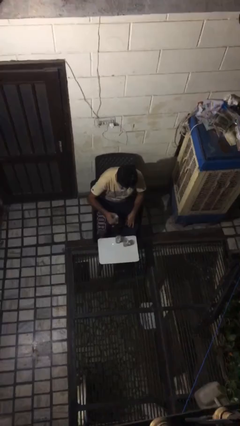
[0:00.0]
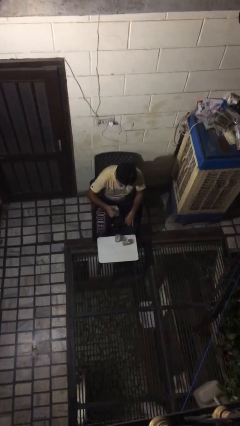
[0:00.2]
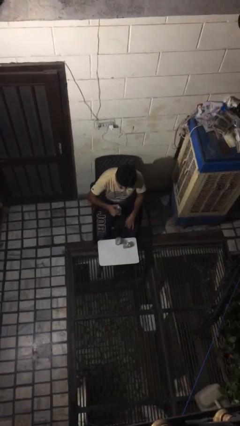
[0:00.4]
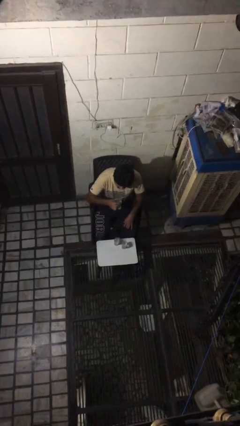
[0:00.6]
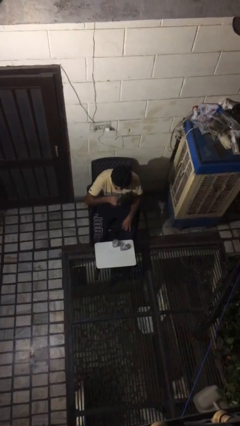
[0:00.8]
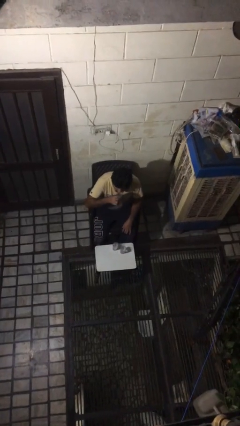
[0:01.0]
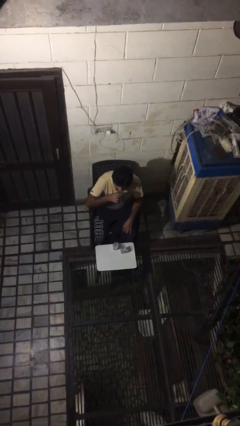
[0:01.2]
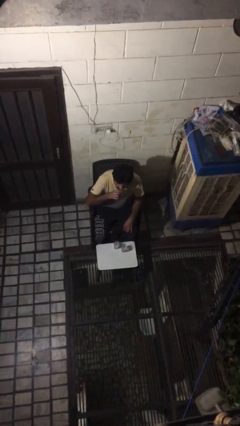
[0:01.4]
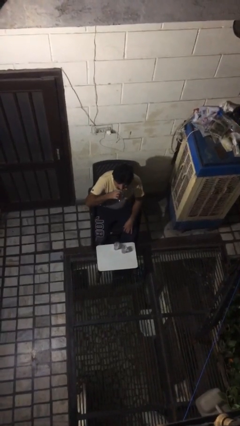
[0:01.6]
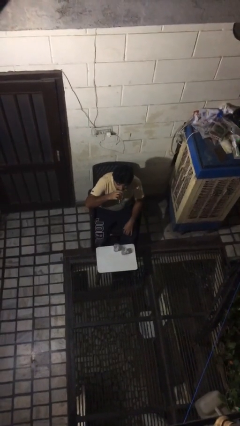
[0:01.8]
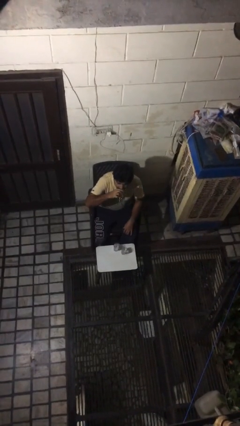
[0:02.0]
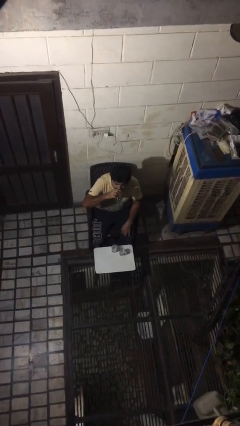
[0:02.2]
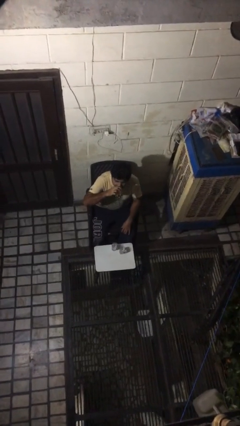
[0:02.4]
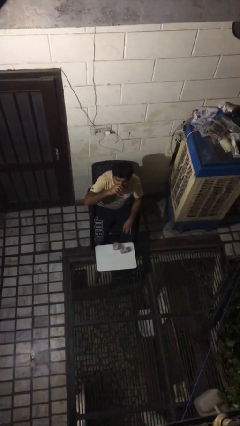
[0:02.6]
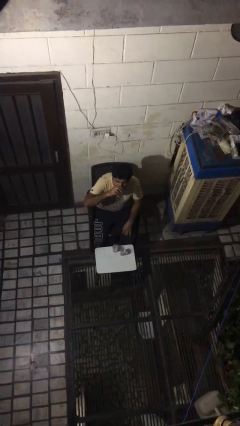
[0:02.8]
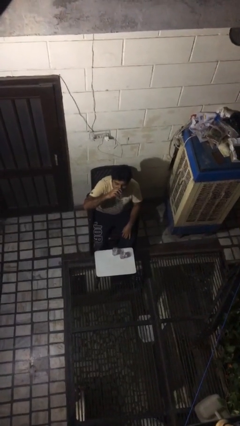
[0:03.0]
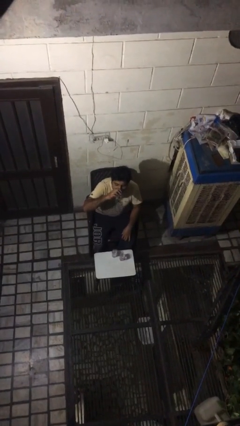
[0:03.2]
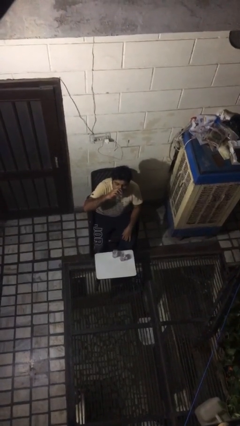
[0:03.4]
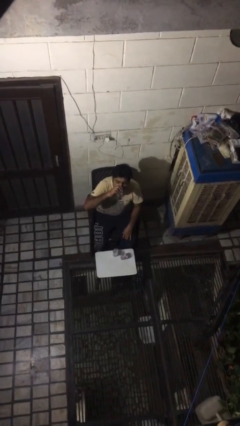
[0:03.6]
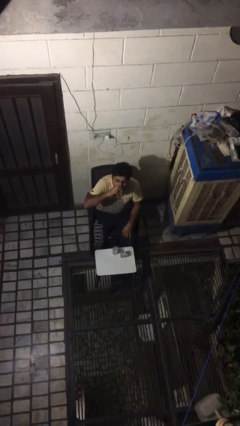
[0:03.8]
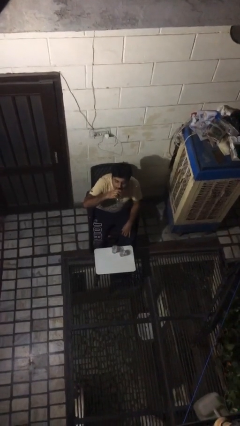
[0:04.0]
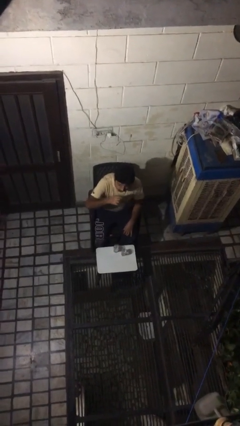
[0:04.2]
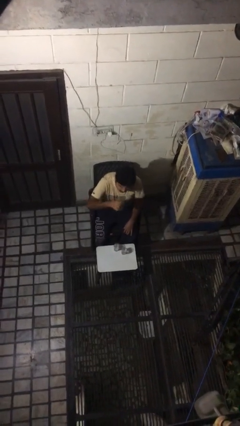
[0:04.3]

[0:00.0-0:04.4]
person drinks from shotglass

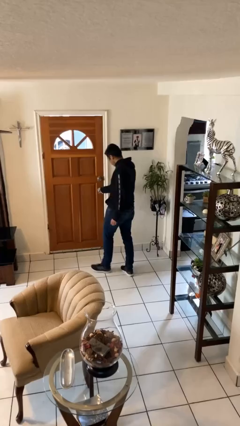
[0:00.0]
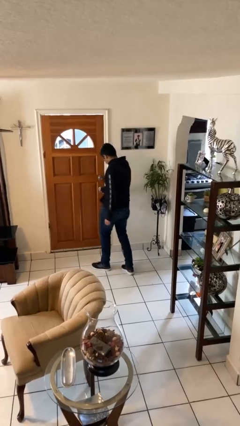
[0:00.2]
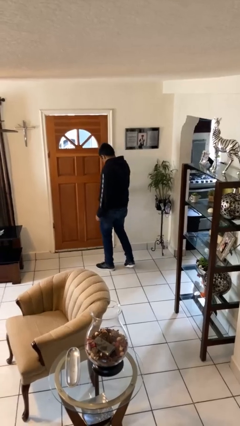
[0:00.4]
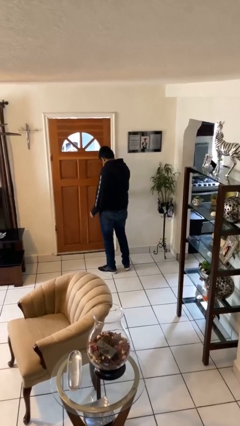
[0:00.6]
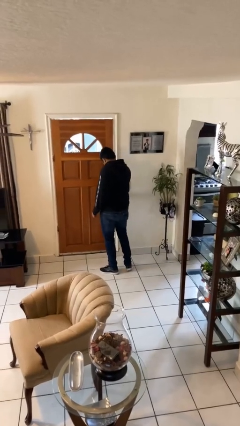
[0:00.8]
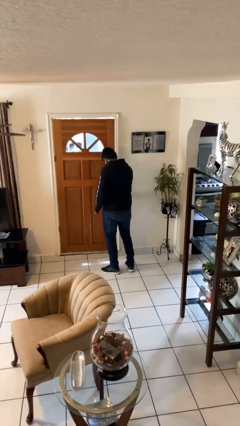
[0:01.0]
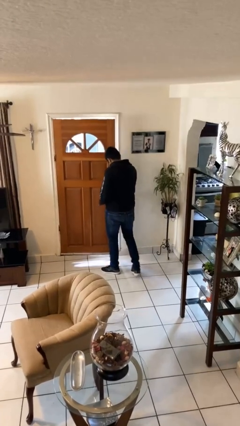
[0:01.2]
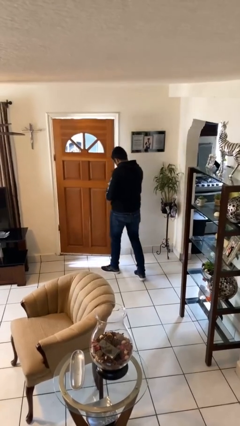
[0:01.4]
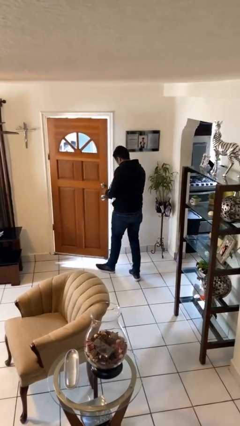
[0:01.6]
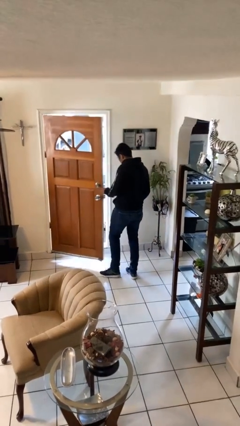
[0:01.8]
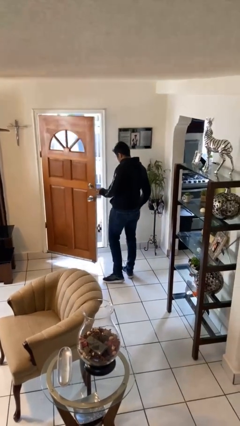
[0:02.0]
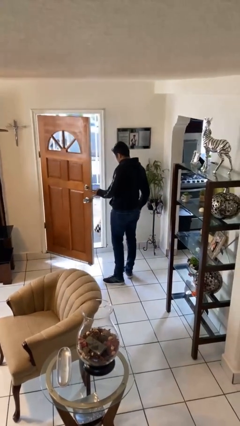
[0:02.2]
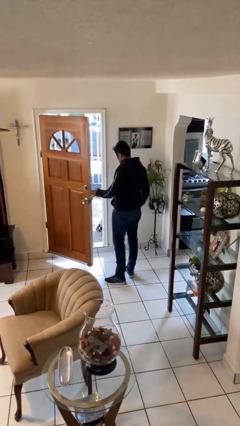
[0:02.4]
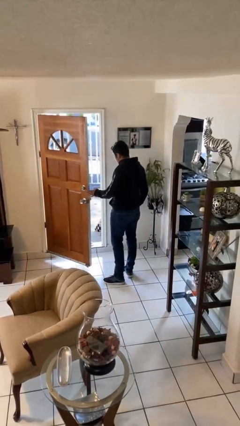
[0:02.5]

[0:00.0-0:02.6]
person opens facility door

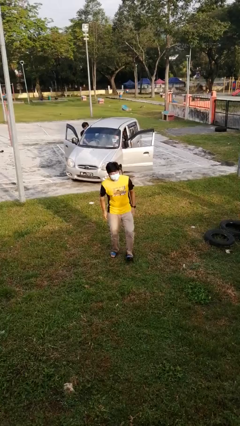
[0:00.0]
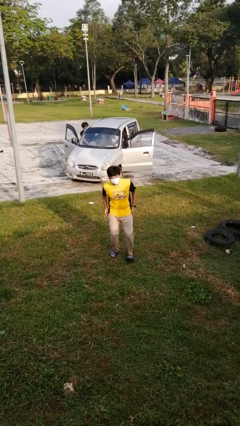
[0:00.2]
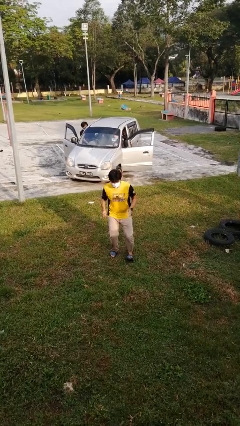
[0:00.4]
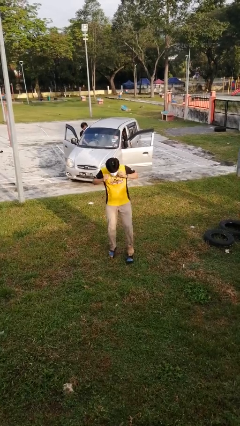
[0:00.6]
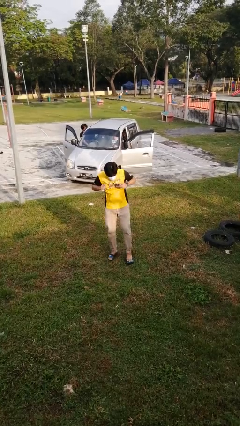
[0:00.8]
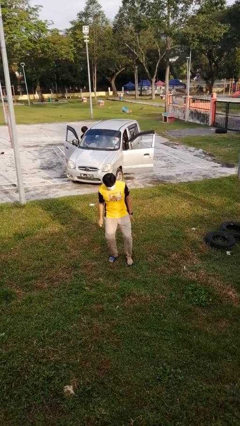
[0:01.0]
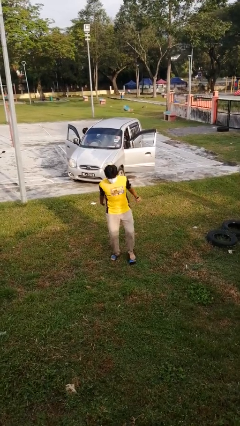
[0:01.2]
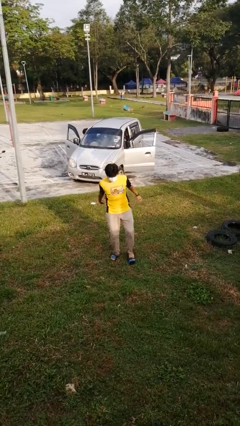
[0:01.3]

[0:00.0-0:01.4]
person jumps

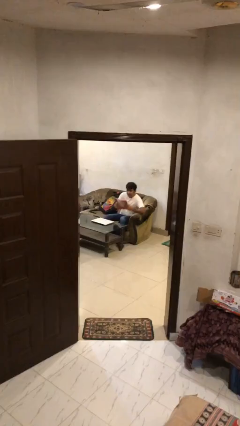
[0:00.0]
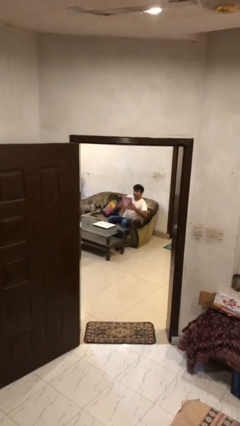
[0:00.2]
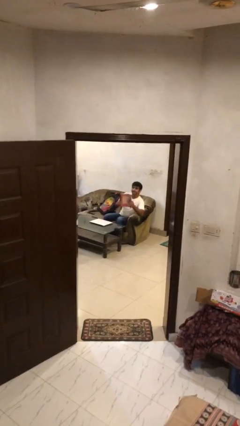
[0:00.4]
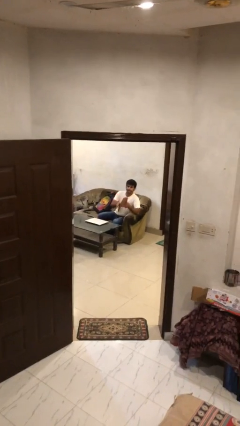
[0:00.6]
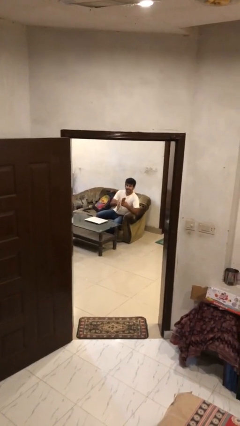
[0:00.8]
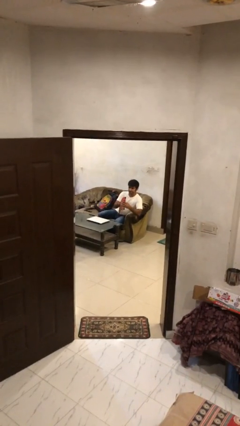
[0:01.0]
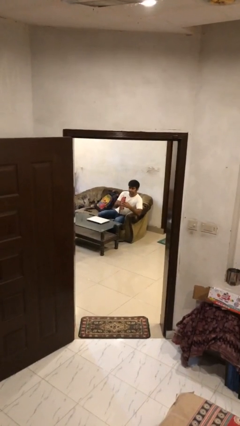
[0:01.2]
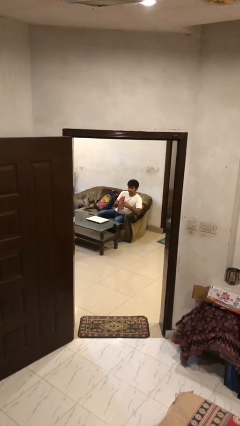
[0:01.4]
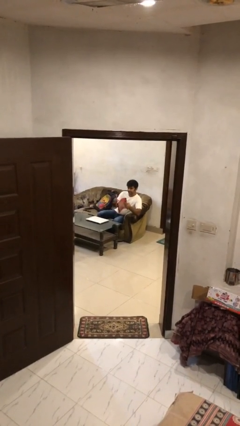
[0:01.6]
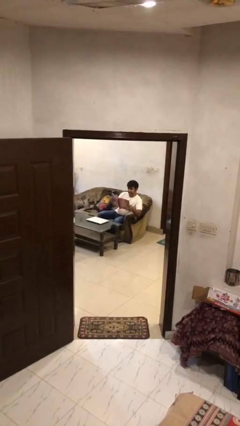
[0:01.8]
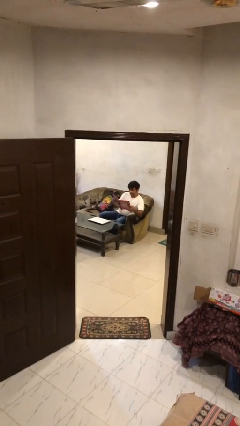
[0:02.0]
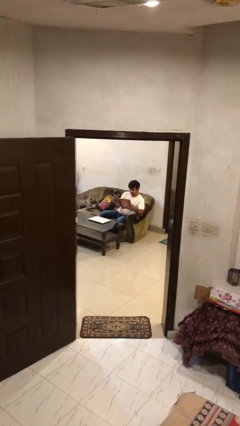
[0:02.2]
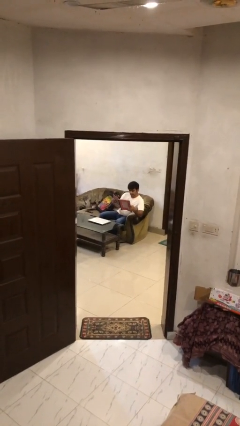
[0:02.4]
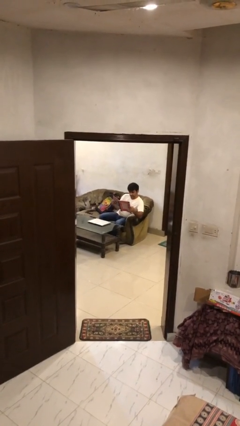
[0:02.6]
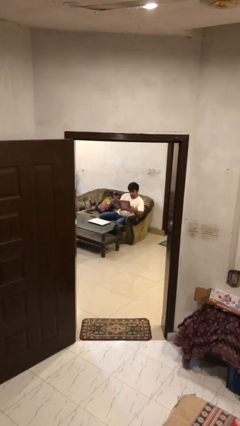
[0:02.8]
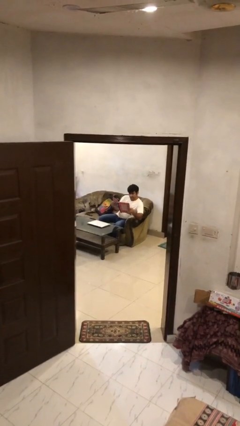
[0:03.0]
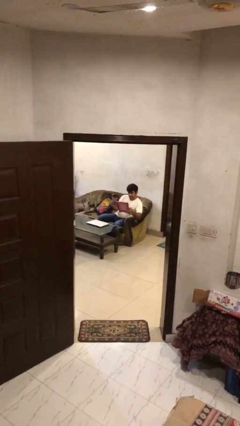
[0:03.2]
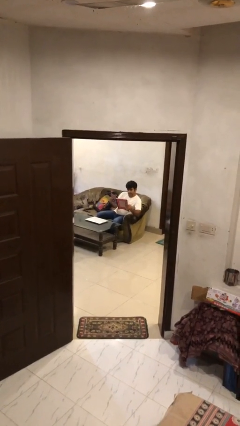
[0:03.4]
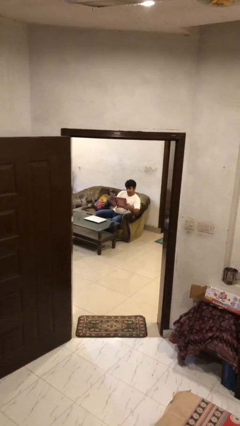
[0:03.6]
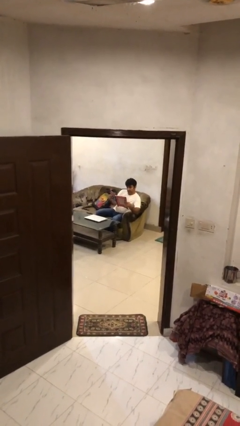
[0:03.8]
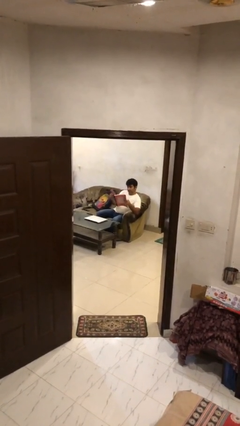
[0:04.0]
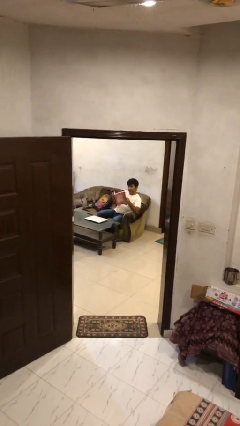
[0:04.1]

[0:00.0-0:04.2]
person reads document

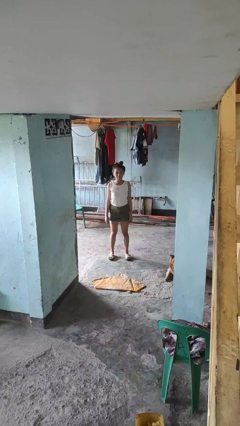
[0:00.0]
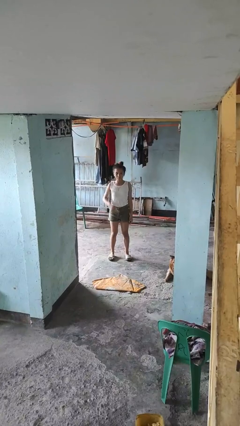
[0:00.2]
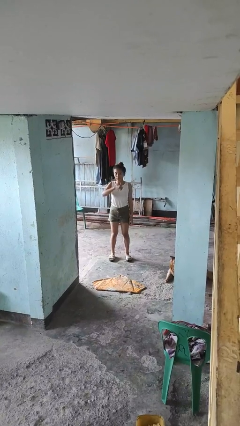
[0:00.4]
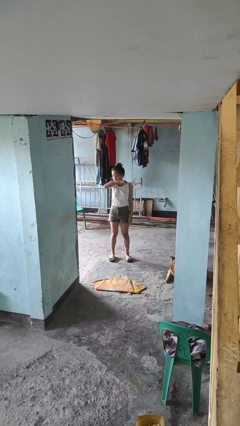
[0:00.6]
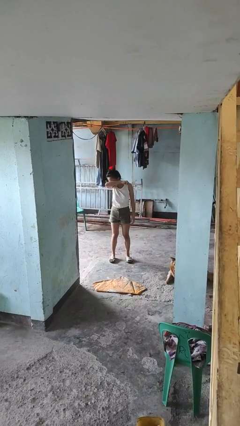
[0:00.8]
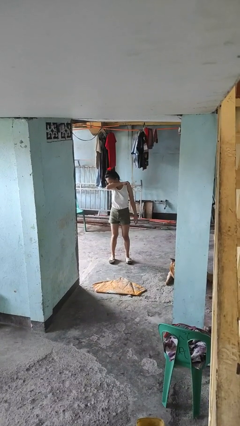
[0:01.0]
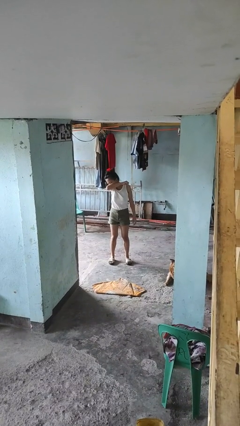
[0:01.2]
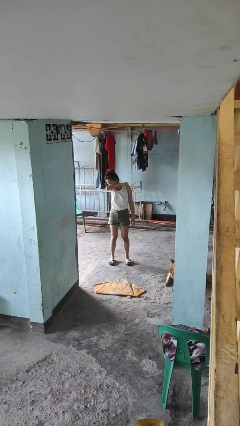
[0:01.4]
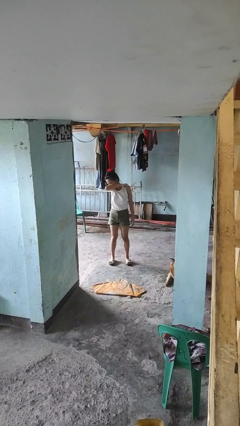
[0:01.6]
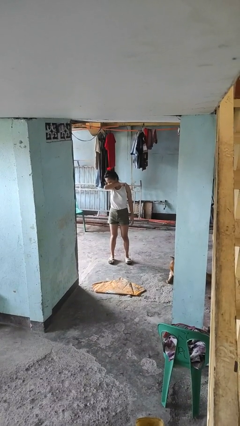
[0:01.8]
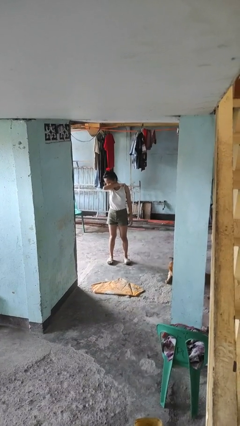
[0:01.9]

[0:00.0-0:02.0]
person sneezes into arm

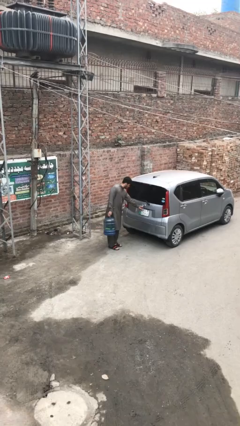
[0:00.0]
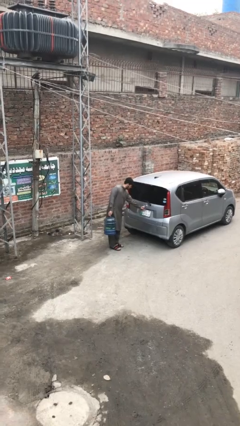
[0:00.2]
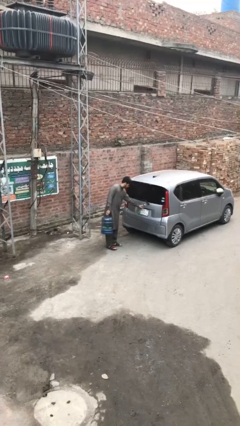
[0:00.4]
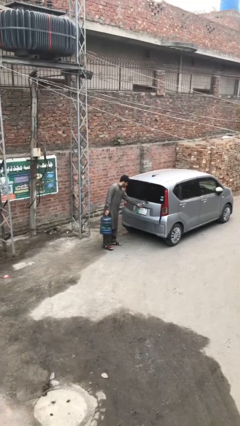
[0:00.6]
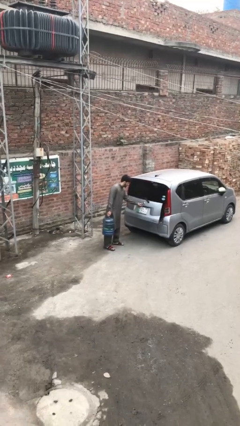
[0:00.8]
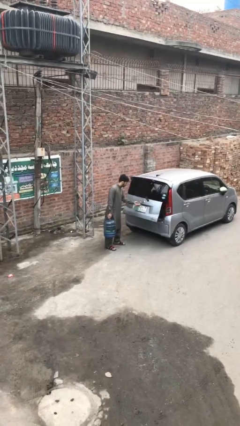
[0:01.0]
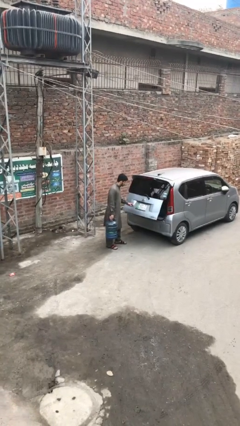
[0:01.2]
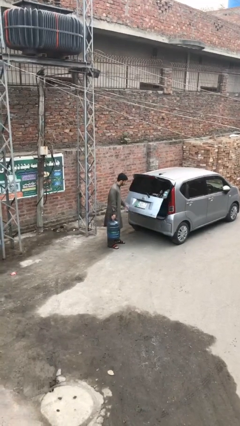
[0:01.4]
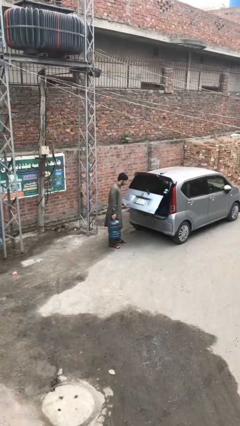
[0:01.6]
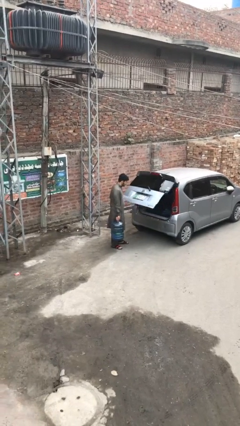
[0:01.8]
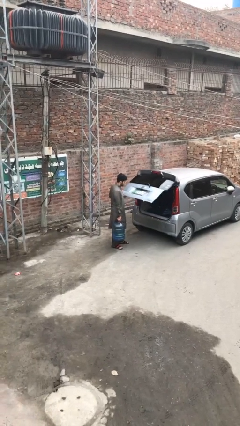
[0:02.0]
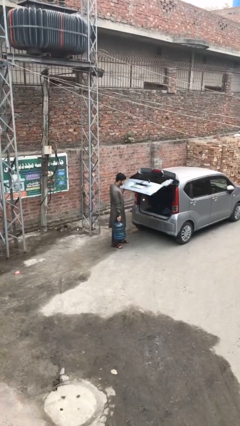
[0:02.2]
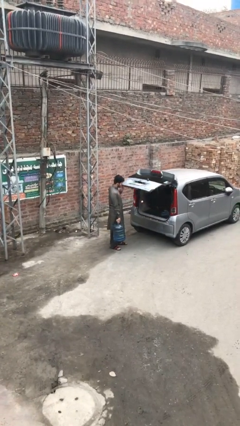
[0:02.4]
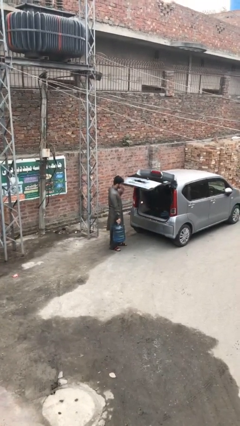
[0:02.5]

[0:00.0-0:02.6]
person opens car trunk
